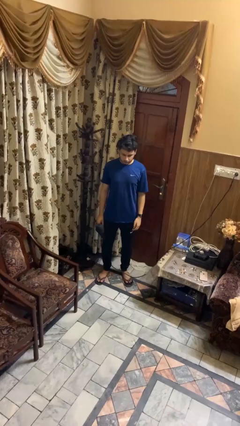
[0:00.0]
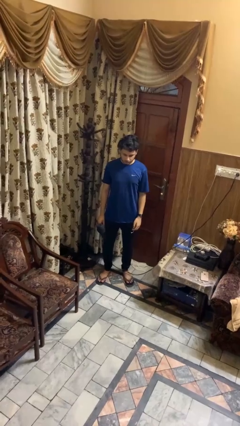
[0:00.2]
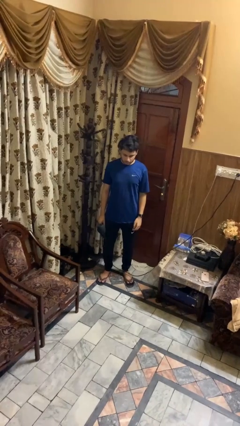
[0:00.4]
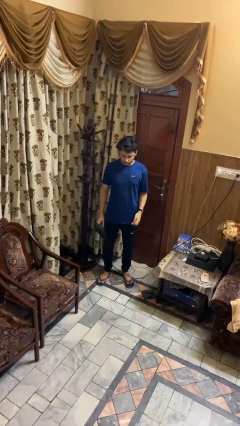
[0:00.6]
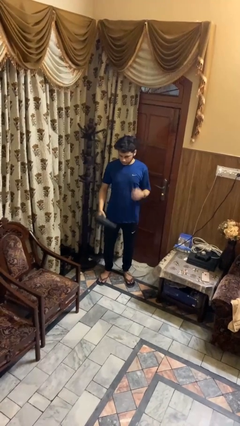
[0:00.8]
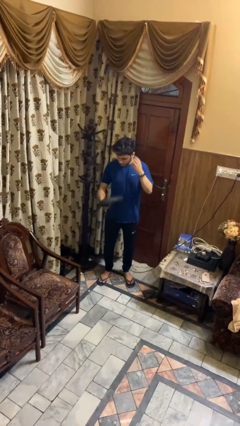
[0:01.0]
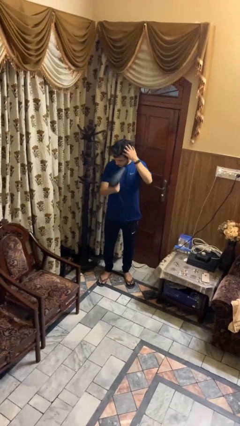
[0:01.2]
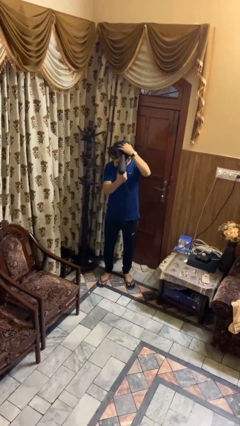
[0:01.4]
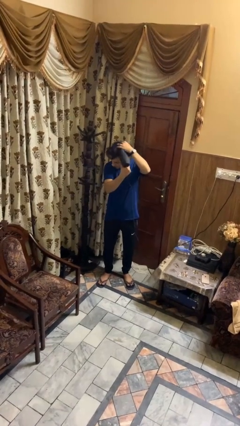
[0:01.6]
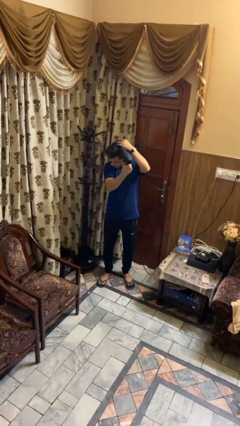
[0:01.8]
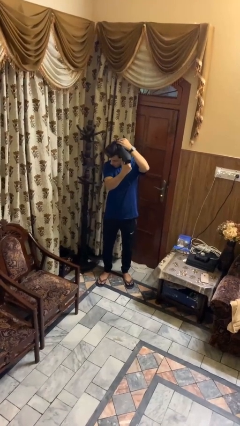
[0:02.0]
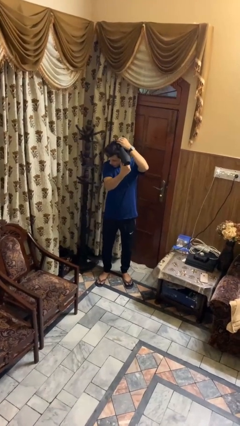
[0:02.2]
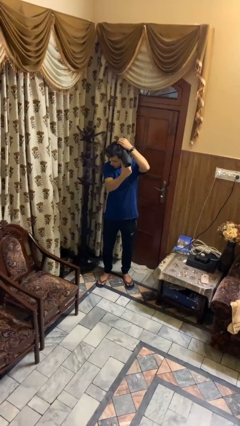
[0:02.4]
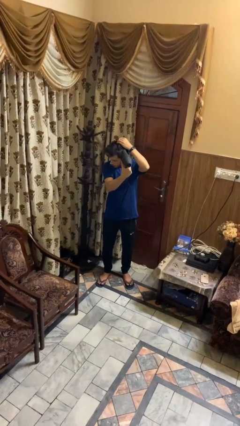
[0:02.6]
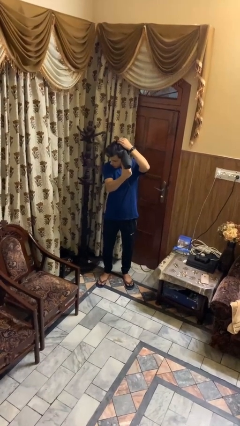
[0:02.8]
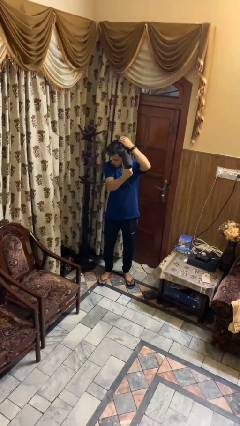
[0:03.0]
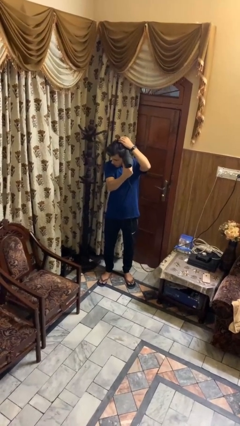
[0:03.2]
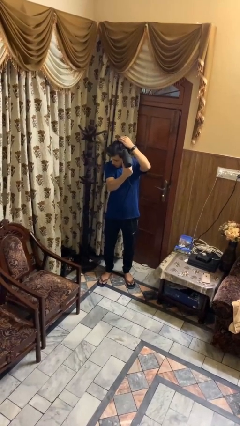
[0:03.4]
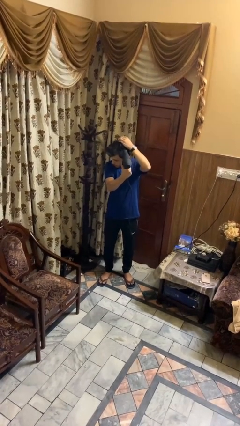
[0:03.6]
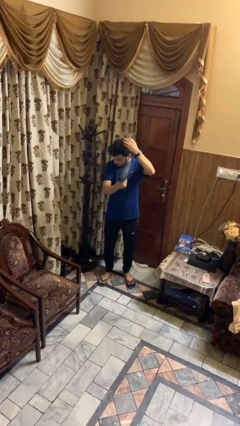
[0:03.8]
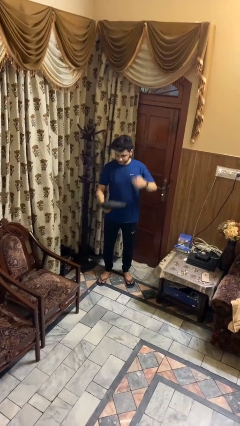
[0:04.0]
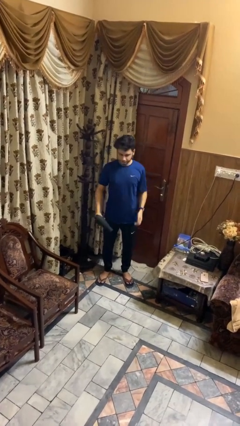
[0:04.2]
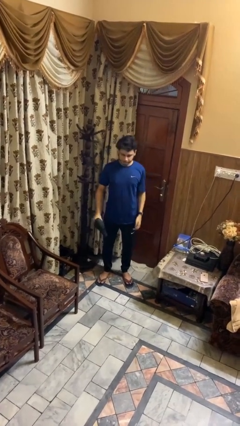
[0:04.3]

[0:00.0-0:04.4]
person dries hair with hairdryer

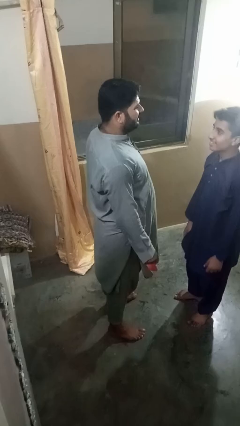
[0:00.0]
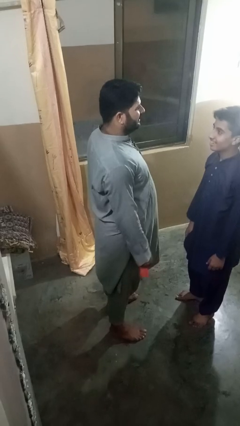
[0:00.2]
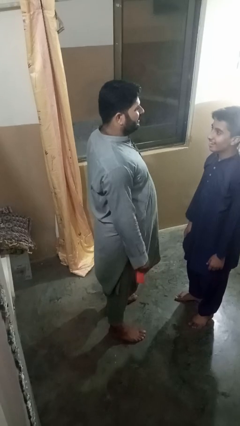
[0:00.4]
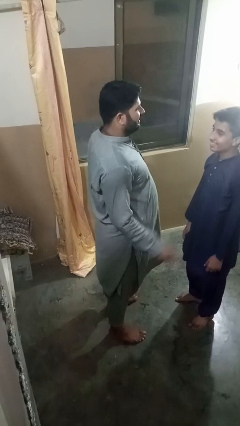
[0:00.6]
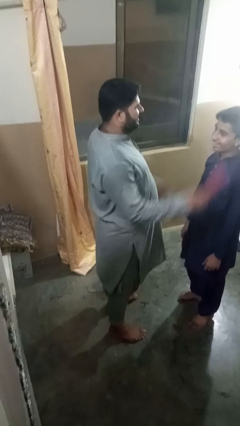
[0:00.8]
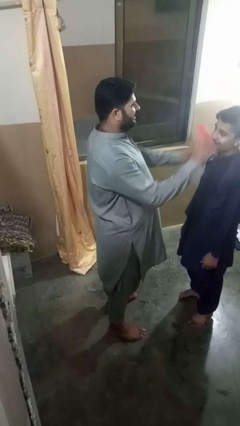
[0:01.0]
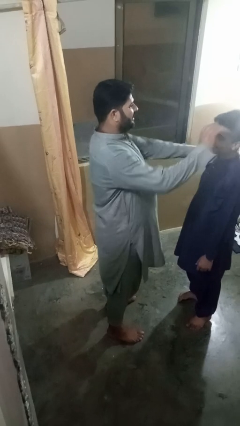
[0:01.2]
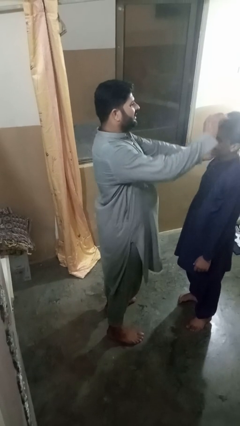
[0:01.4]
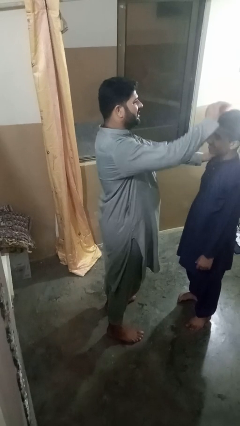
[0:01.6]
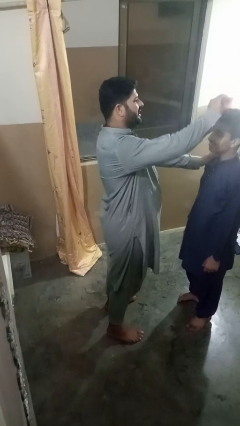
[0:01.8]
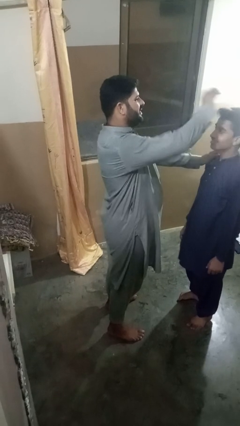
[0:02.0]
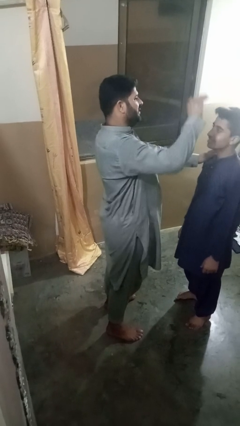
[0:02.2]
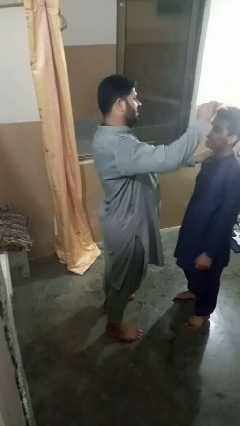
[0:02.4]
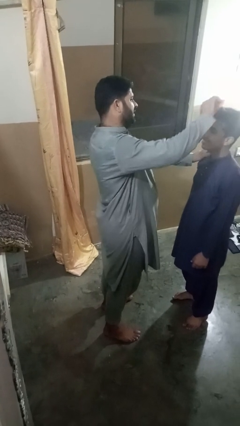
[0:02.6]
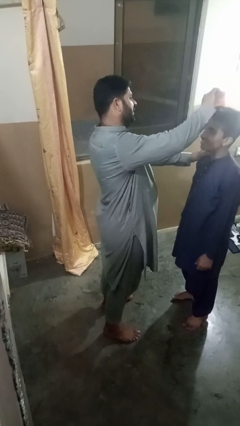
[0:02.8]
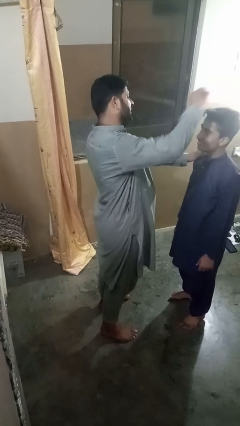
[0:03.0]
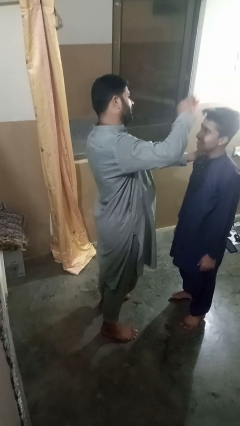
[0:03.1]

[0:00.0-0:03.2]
person brushes hair of person

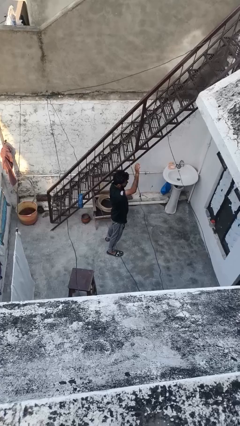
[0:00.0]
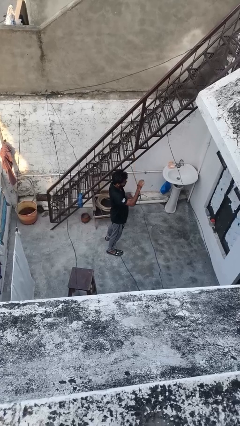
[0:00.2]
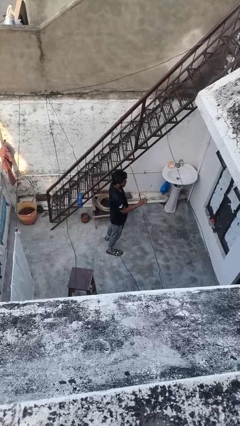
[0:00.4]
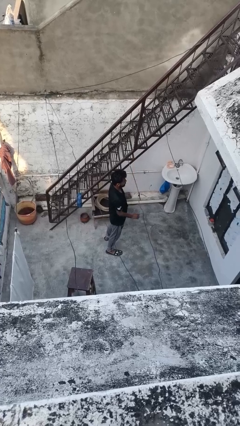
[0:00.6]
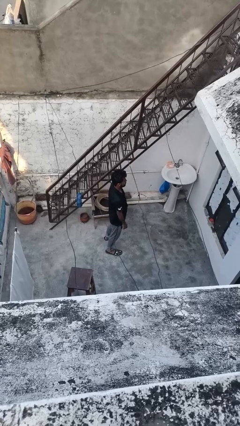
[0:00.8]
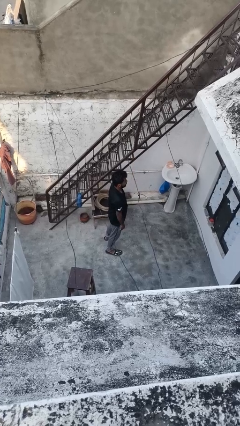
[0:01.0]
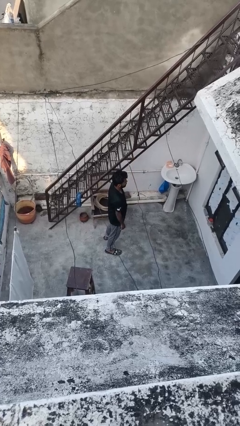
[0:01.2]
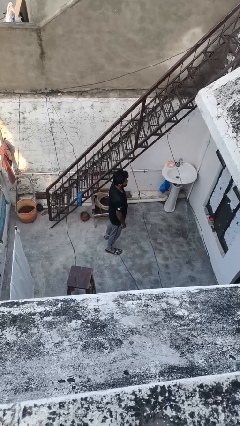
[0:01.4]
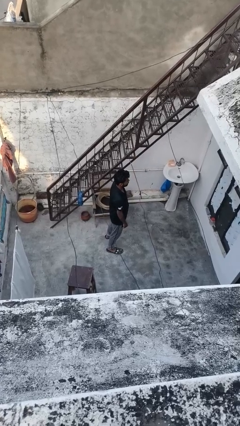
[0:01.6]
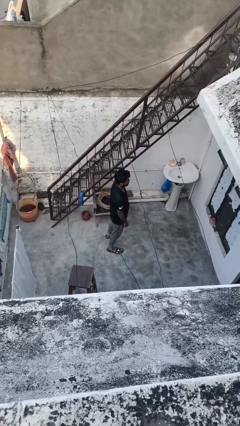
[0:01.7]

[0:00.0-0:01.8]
person gestures lower hand

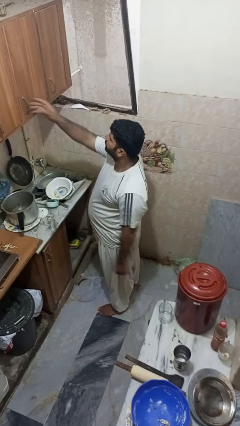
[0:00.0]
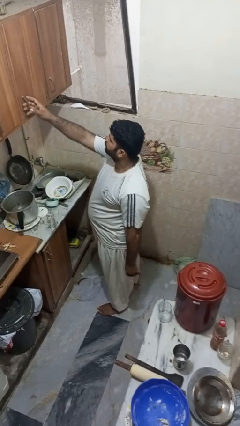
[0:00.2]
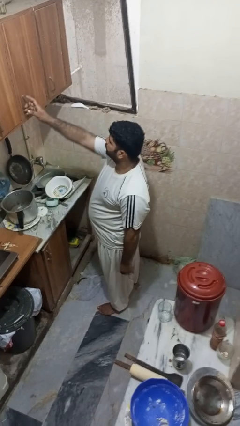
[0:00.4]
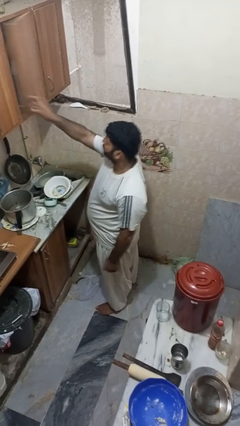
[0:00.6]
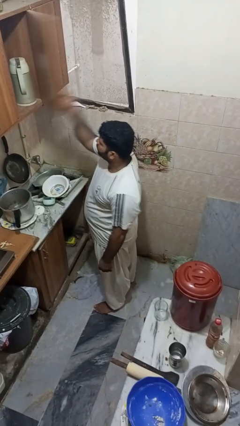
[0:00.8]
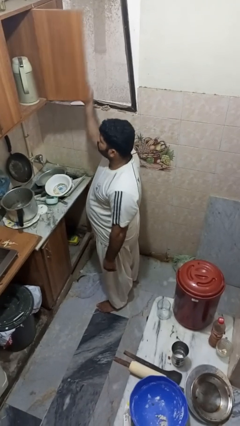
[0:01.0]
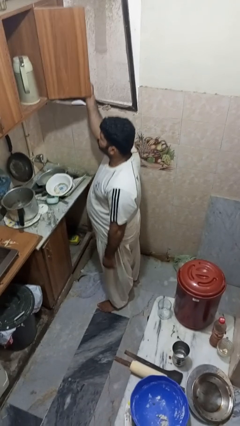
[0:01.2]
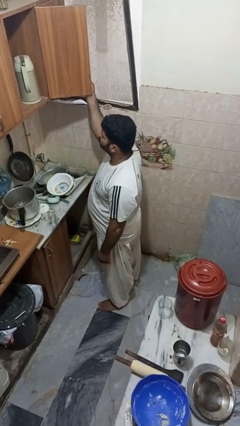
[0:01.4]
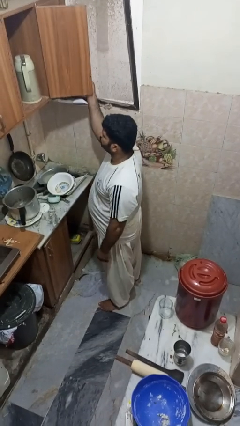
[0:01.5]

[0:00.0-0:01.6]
person opens cabinet

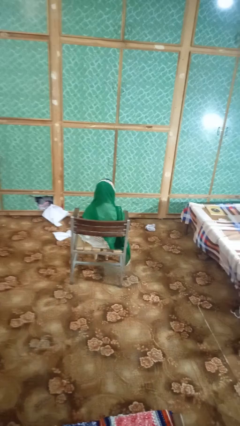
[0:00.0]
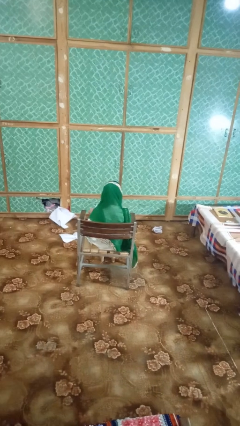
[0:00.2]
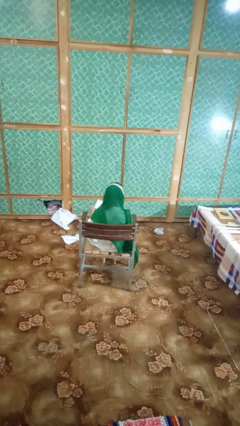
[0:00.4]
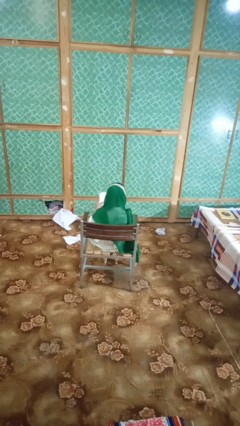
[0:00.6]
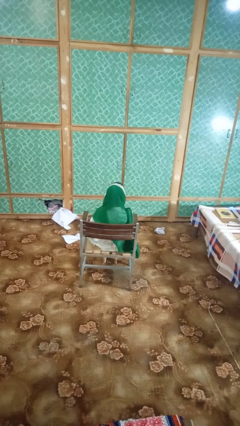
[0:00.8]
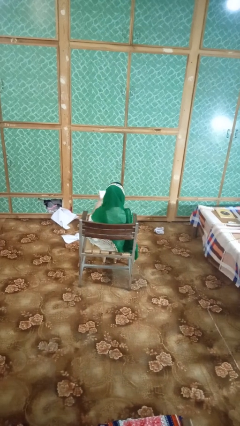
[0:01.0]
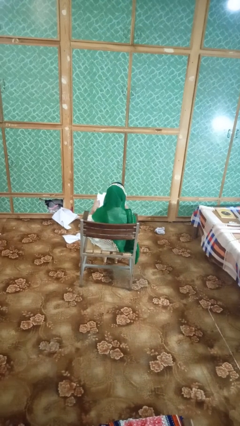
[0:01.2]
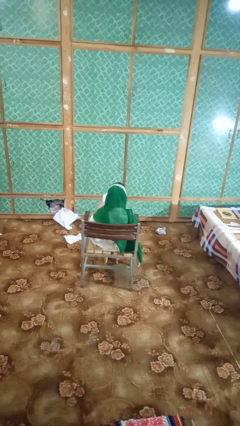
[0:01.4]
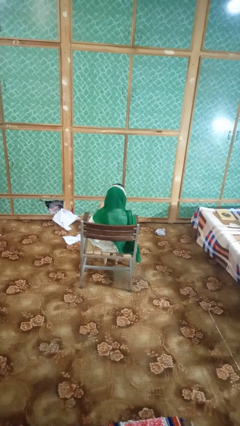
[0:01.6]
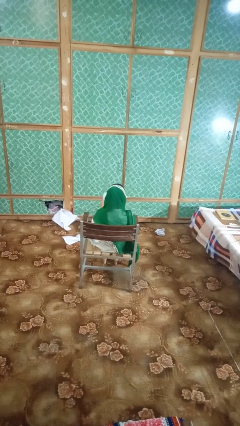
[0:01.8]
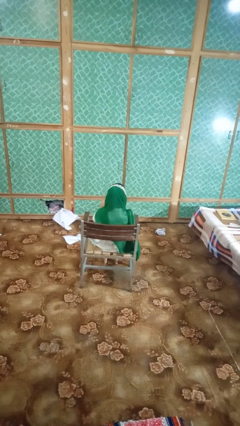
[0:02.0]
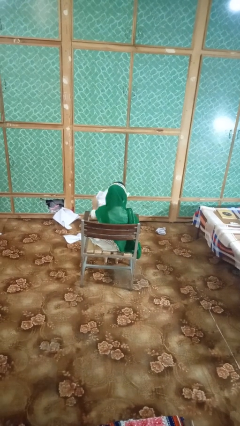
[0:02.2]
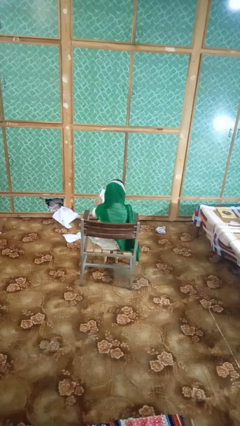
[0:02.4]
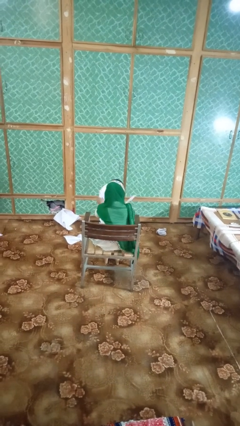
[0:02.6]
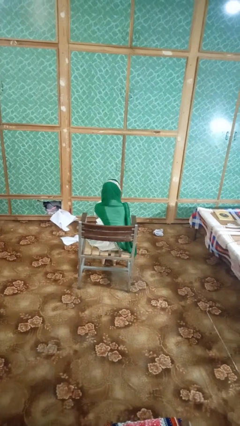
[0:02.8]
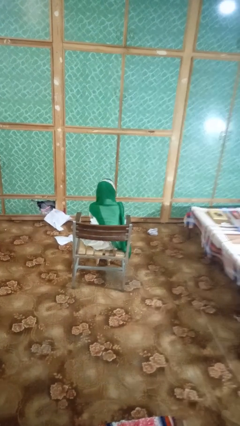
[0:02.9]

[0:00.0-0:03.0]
person tears paper

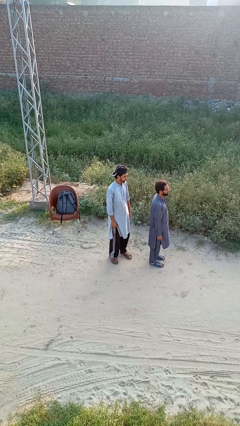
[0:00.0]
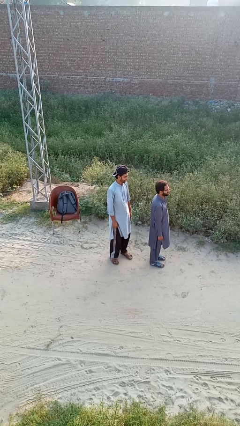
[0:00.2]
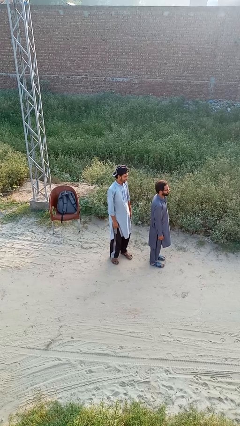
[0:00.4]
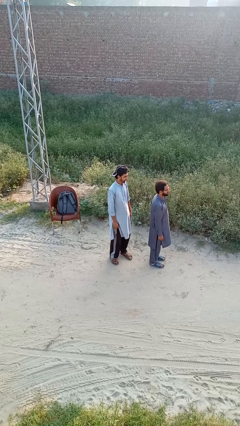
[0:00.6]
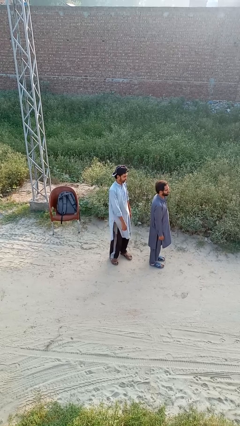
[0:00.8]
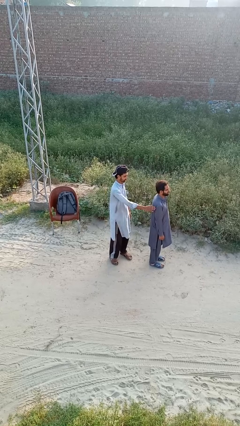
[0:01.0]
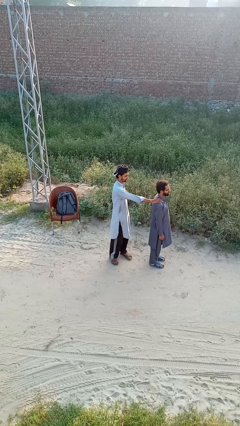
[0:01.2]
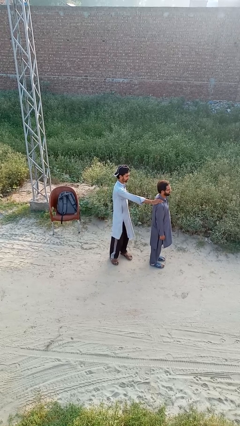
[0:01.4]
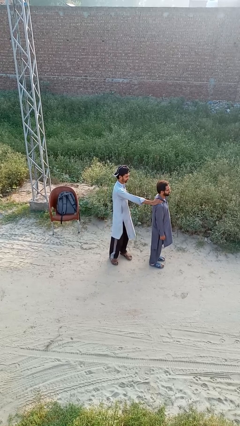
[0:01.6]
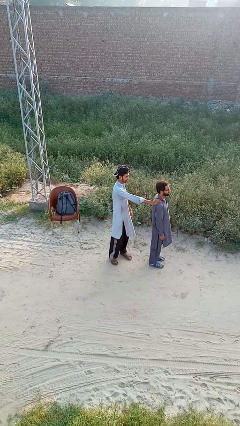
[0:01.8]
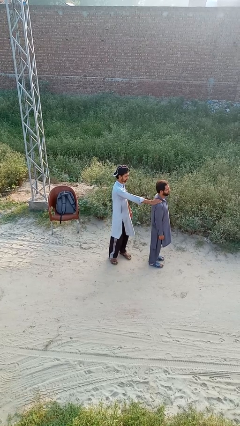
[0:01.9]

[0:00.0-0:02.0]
person grabs person by shoulder

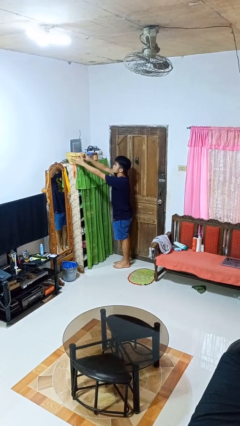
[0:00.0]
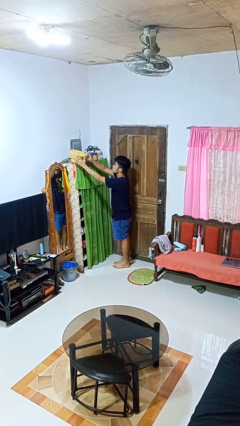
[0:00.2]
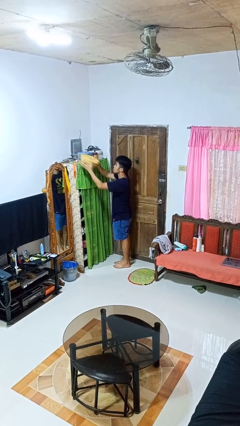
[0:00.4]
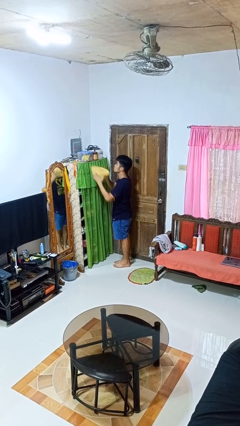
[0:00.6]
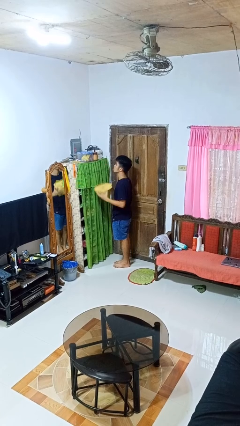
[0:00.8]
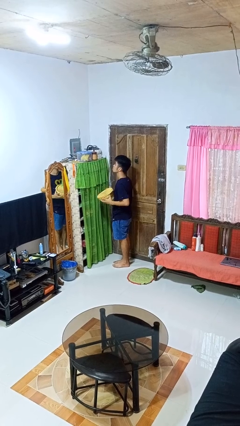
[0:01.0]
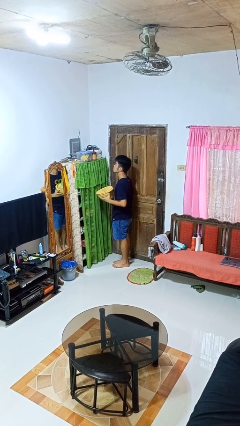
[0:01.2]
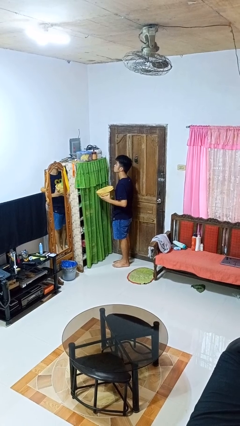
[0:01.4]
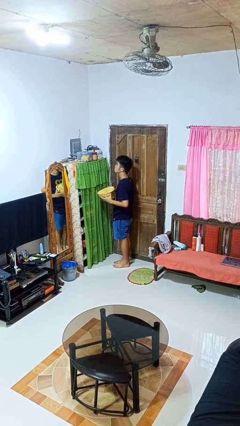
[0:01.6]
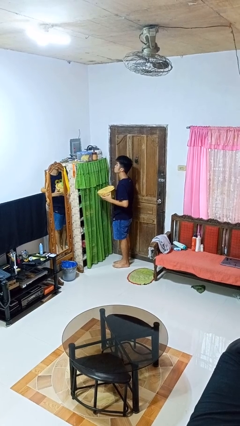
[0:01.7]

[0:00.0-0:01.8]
person picks up object from shelf
